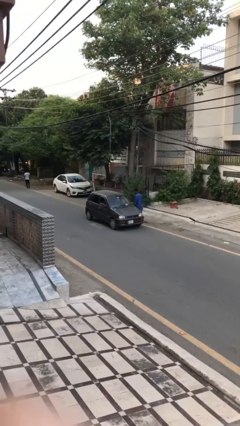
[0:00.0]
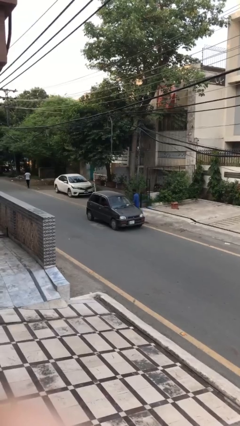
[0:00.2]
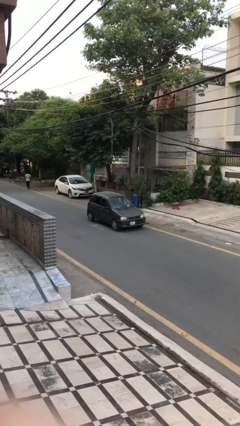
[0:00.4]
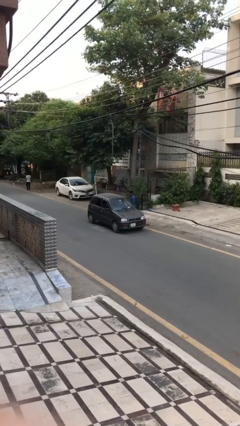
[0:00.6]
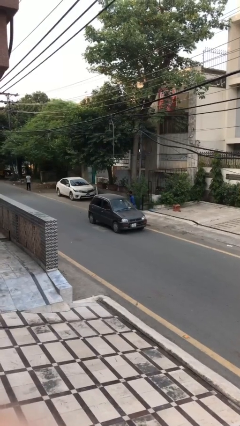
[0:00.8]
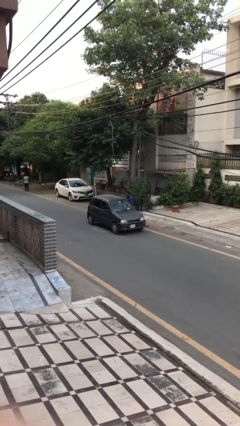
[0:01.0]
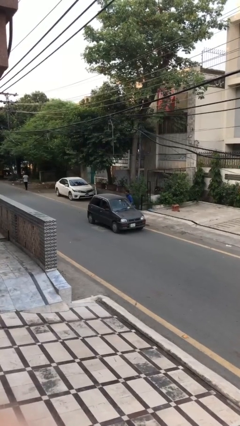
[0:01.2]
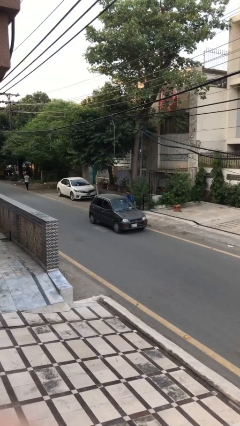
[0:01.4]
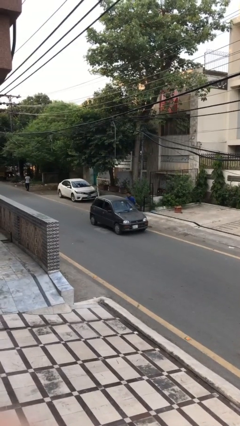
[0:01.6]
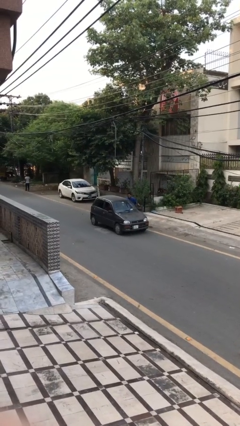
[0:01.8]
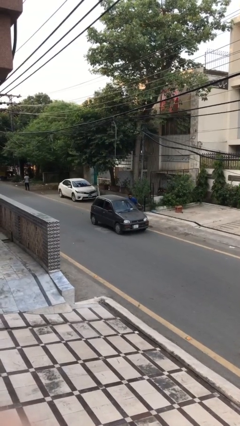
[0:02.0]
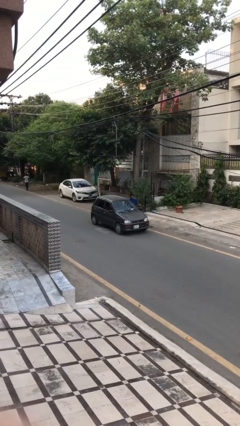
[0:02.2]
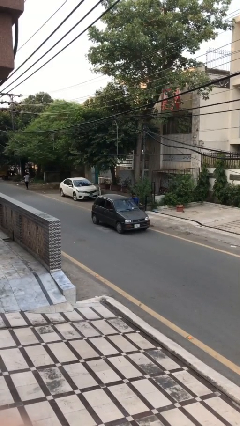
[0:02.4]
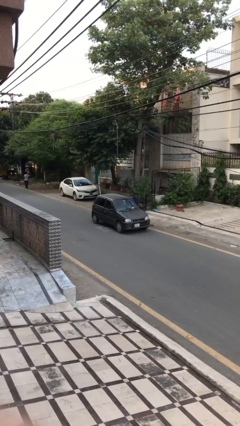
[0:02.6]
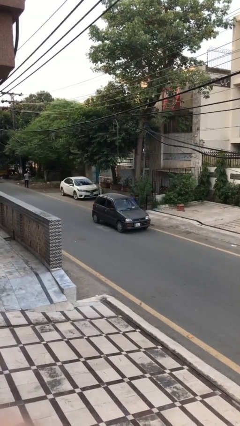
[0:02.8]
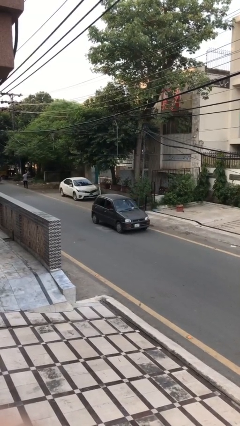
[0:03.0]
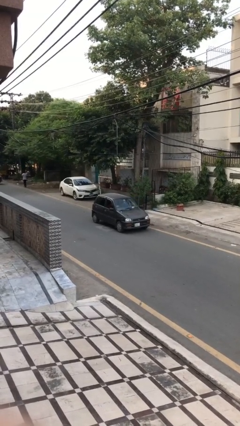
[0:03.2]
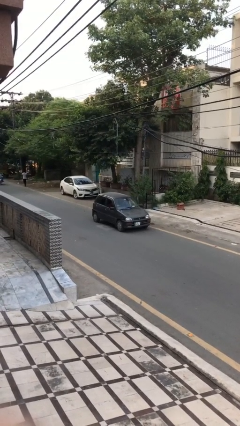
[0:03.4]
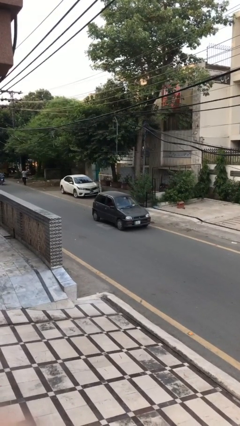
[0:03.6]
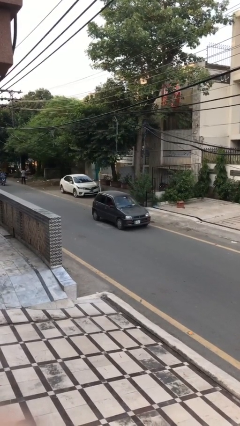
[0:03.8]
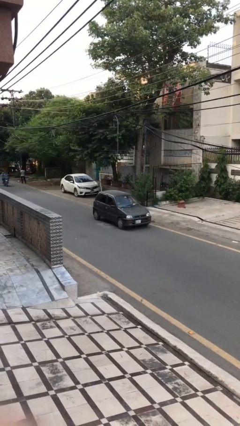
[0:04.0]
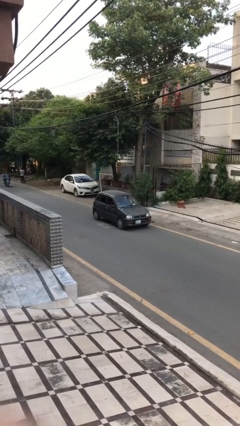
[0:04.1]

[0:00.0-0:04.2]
car picks up person

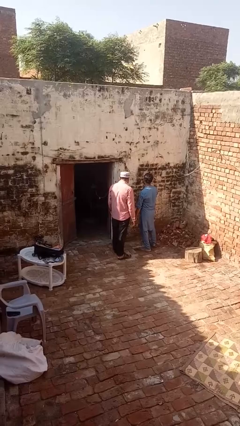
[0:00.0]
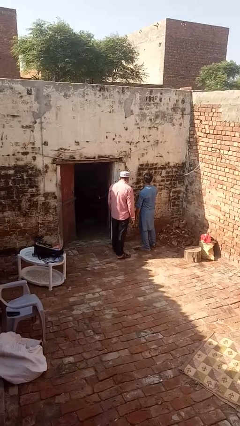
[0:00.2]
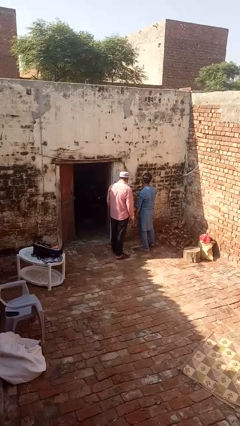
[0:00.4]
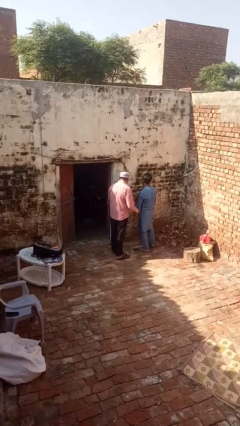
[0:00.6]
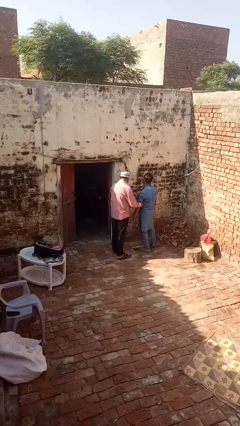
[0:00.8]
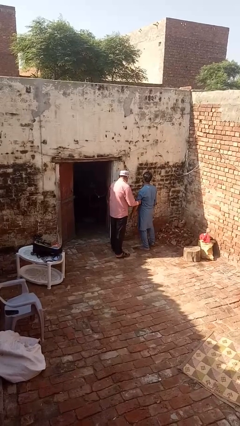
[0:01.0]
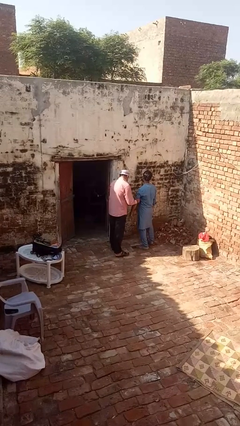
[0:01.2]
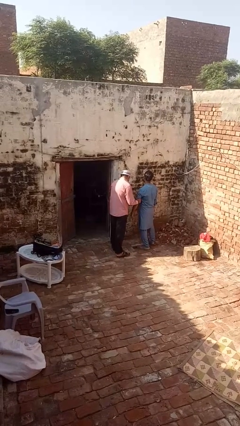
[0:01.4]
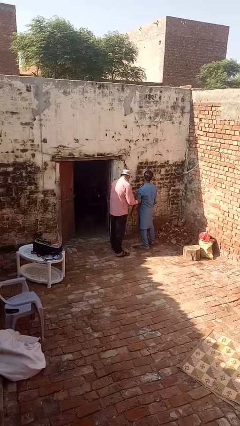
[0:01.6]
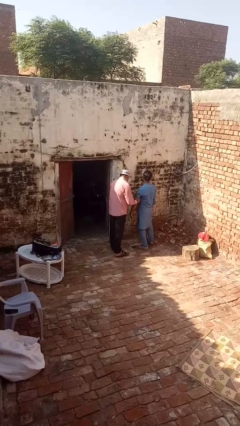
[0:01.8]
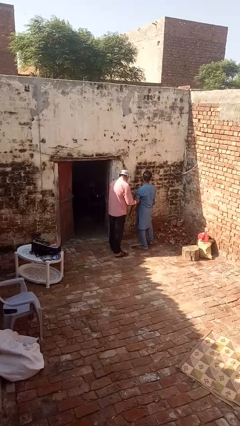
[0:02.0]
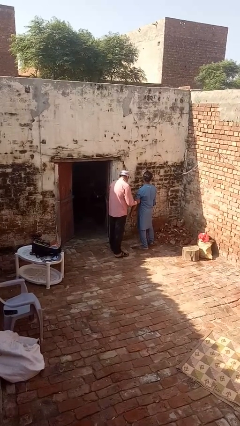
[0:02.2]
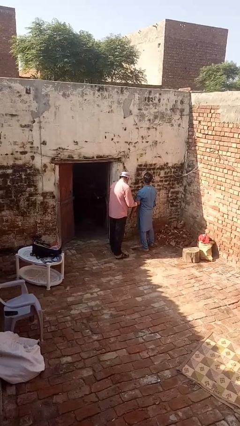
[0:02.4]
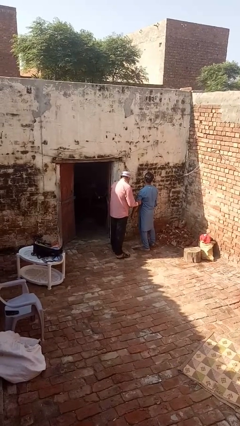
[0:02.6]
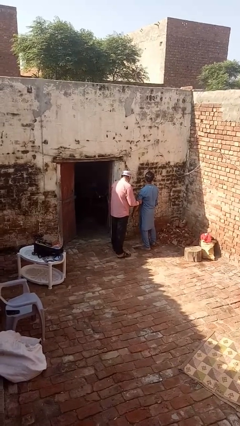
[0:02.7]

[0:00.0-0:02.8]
person grabs person by bicep

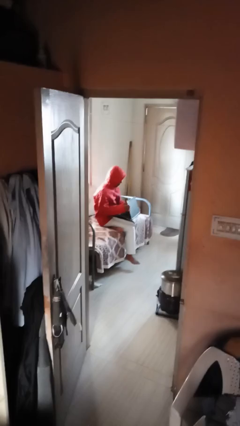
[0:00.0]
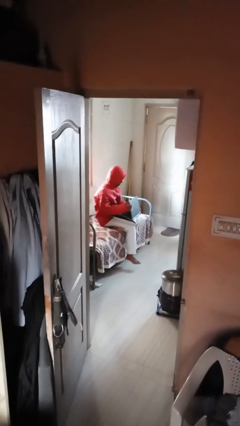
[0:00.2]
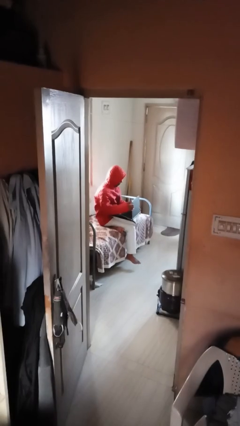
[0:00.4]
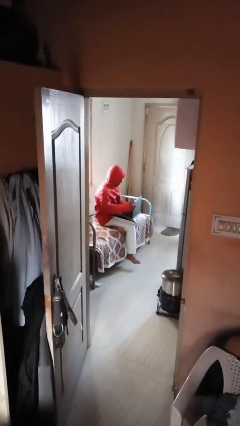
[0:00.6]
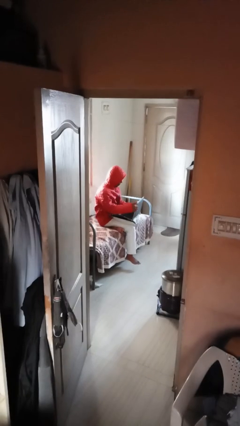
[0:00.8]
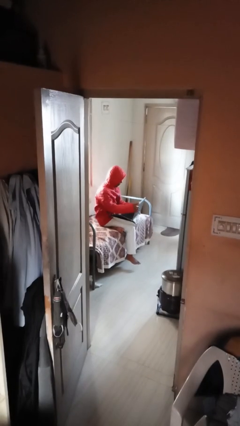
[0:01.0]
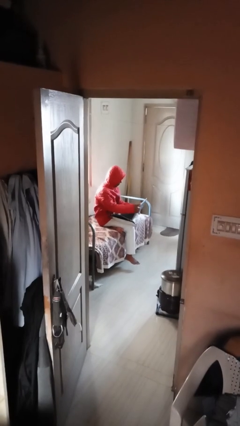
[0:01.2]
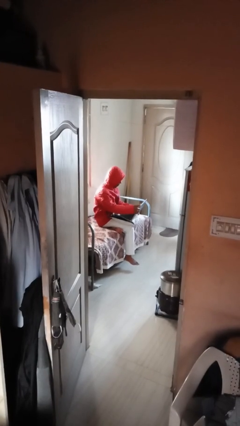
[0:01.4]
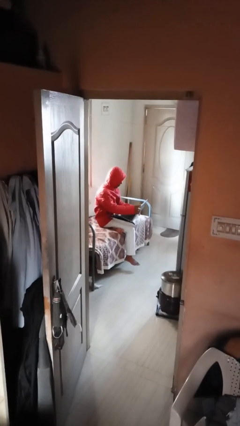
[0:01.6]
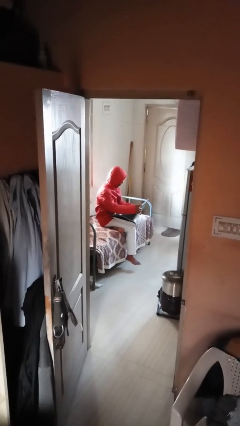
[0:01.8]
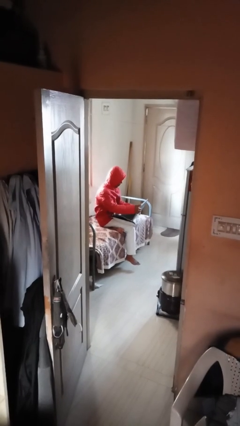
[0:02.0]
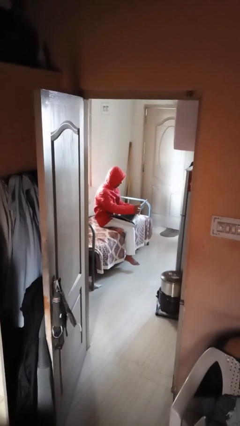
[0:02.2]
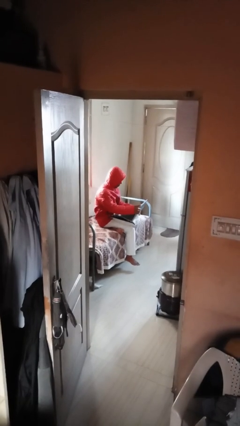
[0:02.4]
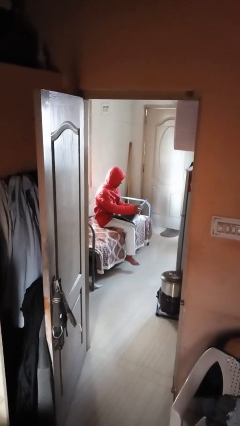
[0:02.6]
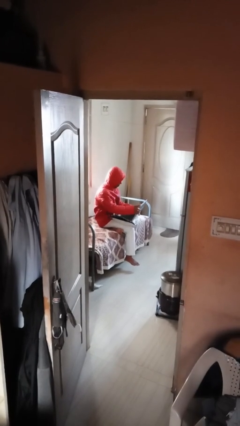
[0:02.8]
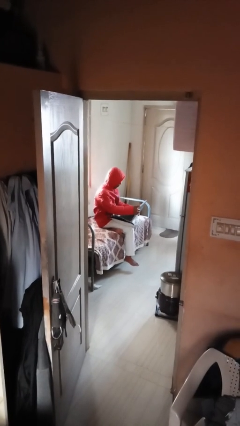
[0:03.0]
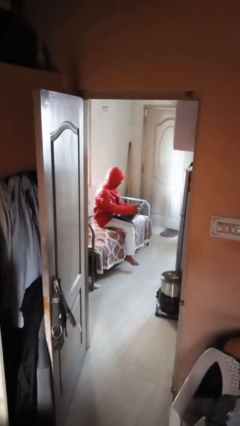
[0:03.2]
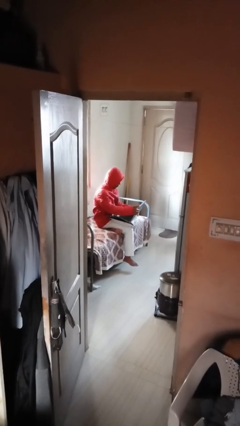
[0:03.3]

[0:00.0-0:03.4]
person interacts with laptop

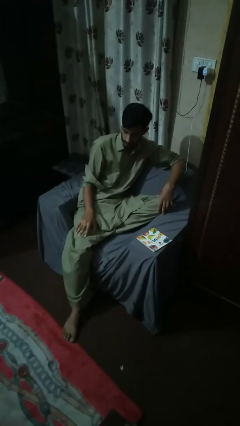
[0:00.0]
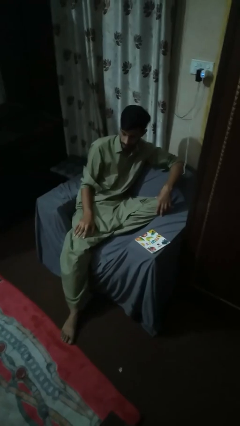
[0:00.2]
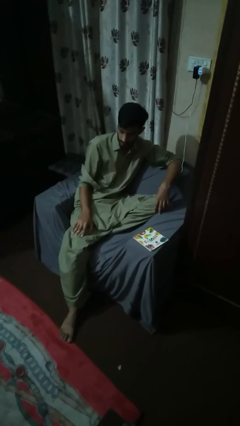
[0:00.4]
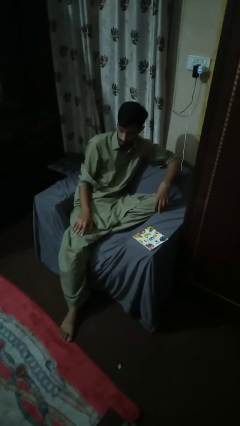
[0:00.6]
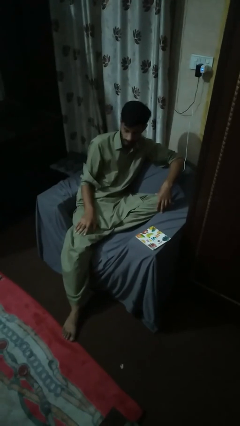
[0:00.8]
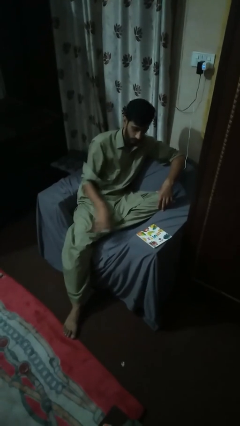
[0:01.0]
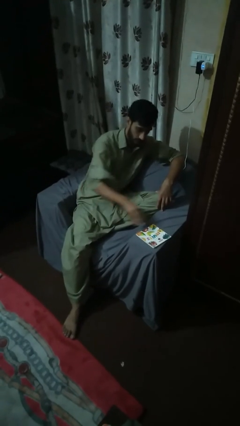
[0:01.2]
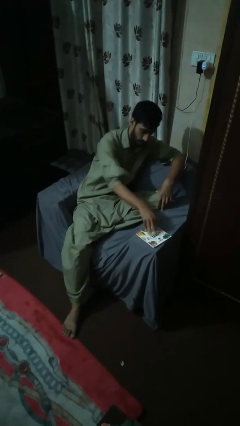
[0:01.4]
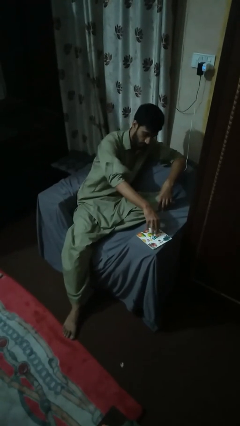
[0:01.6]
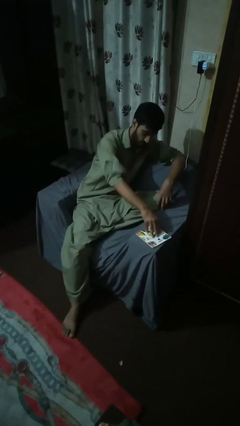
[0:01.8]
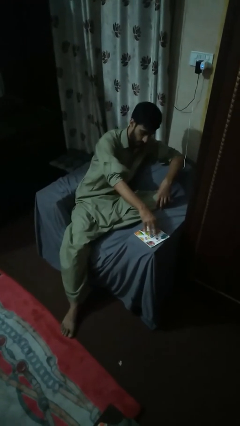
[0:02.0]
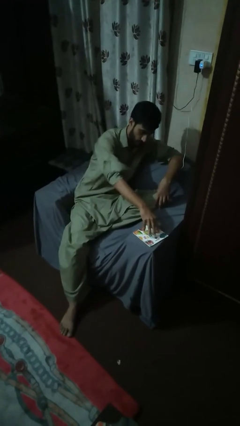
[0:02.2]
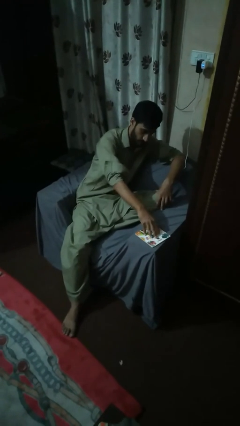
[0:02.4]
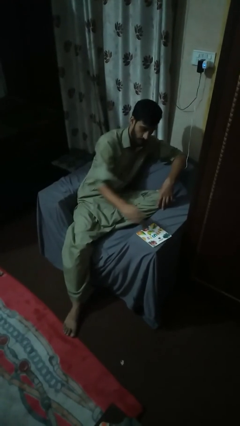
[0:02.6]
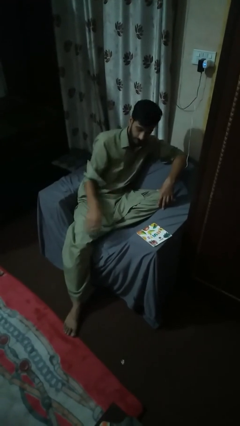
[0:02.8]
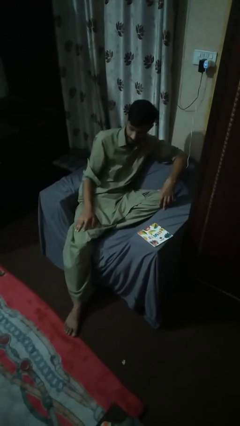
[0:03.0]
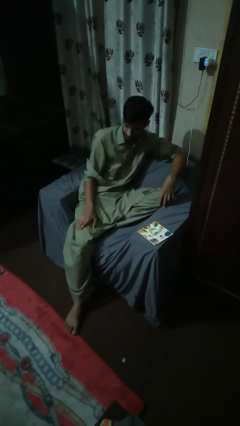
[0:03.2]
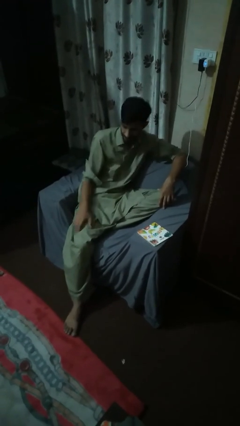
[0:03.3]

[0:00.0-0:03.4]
person taps object with finger

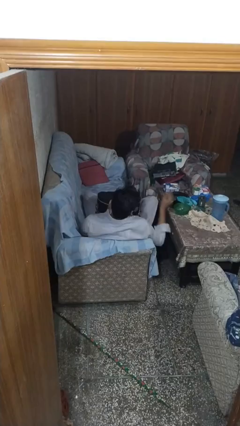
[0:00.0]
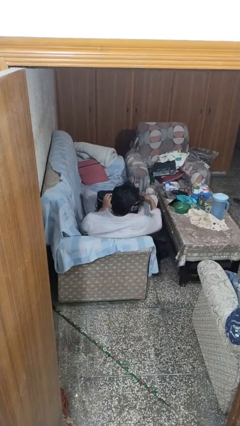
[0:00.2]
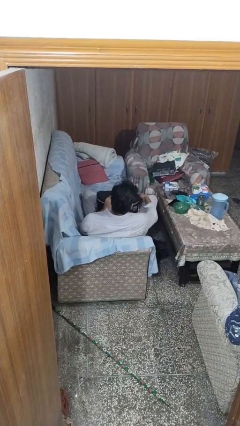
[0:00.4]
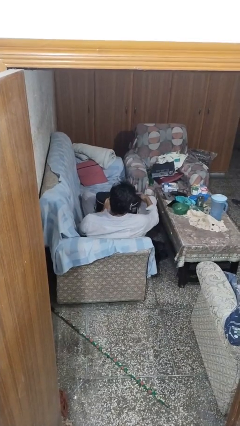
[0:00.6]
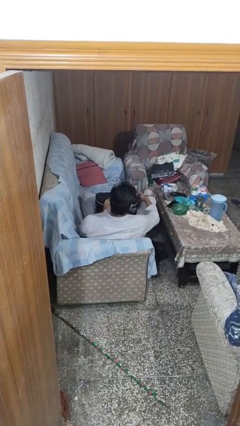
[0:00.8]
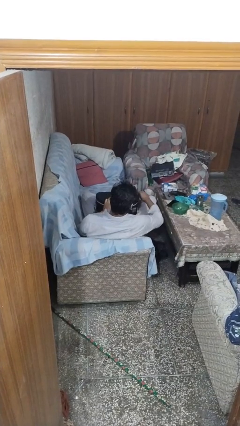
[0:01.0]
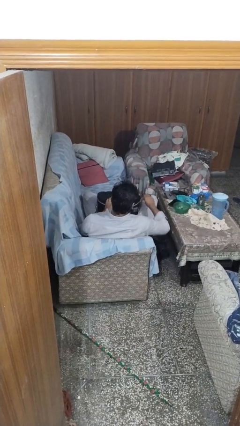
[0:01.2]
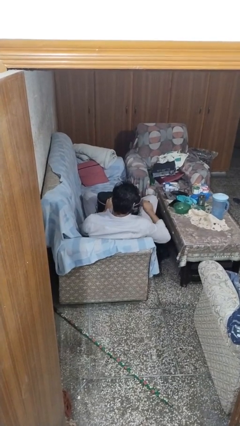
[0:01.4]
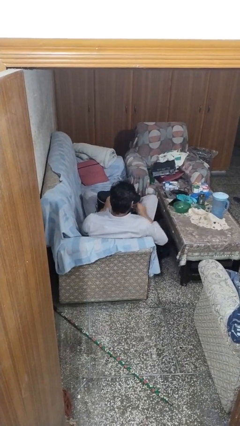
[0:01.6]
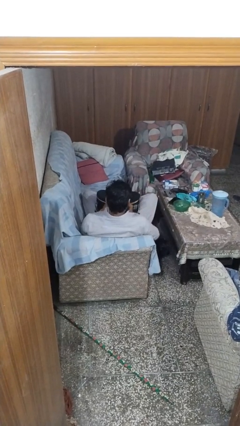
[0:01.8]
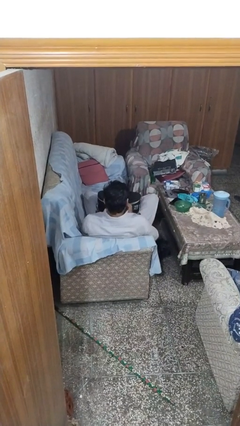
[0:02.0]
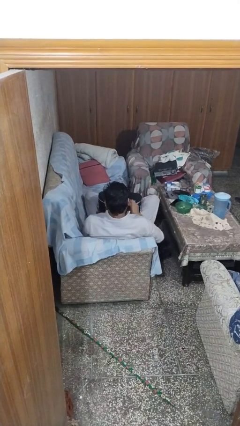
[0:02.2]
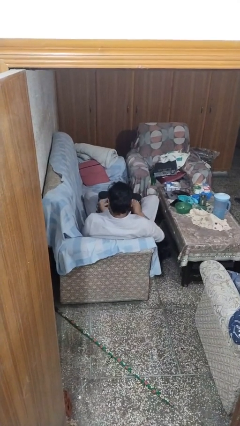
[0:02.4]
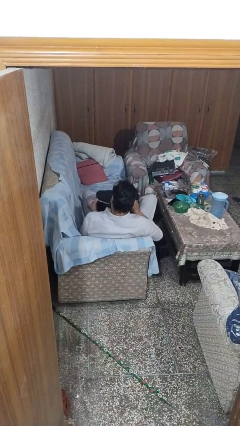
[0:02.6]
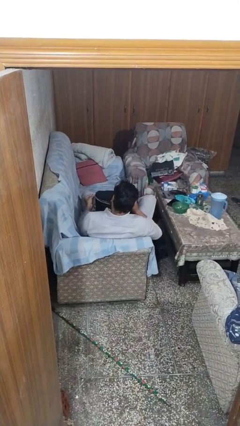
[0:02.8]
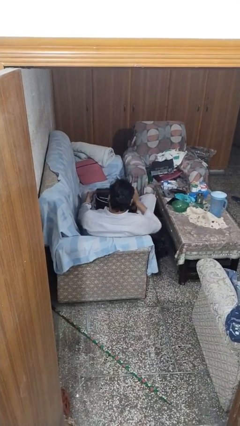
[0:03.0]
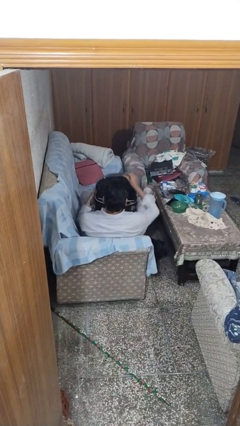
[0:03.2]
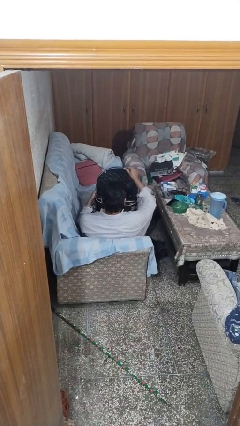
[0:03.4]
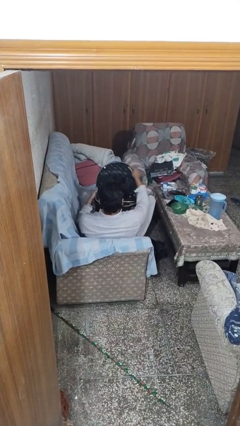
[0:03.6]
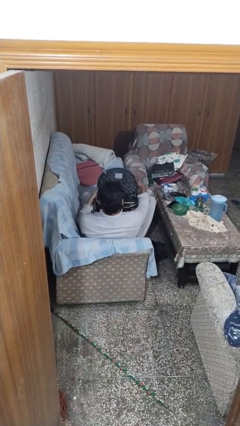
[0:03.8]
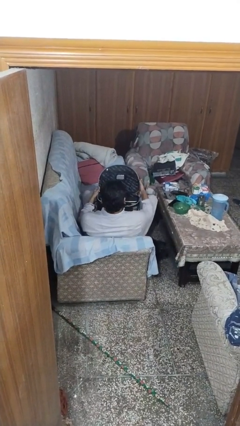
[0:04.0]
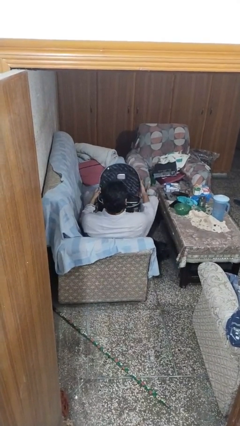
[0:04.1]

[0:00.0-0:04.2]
person opens suitcase
